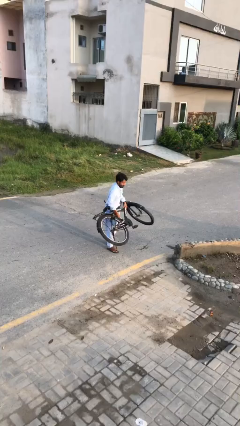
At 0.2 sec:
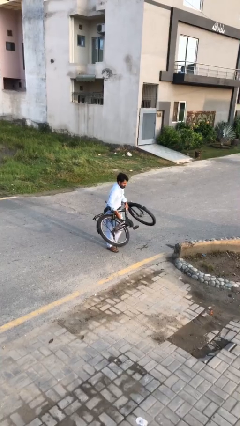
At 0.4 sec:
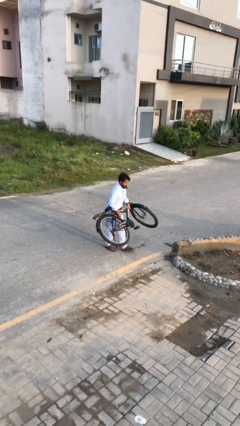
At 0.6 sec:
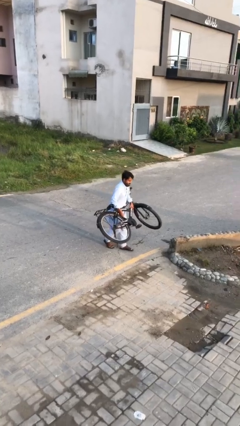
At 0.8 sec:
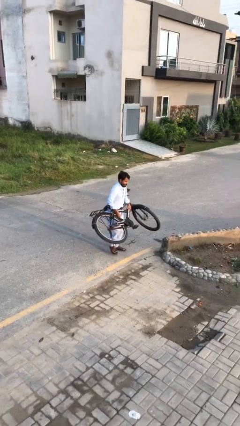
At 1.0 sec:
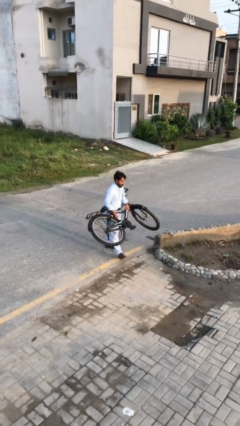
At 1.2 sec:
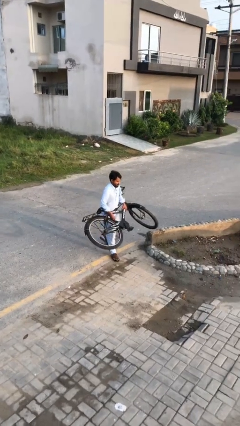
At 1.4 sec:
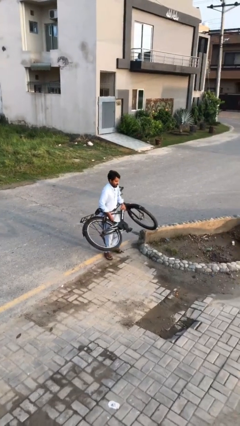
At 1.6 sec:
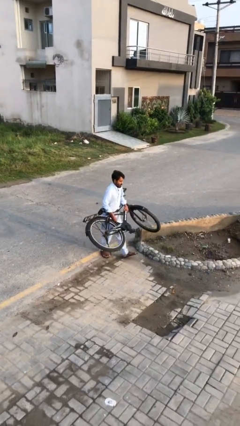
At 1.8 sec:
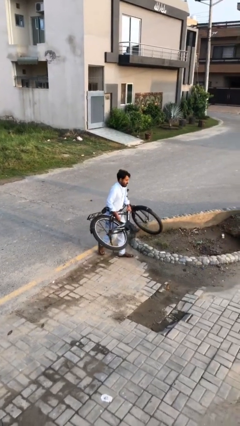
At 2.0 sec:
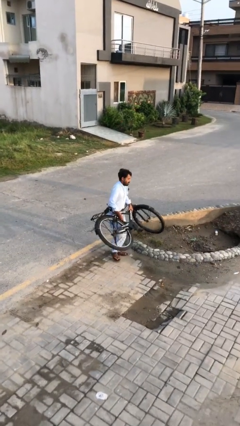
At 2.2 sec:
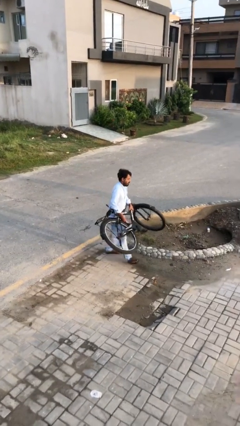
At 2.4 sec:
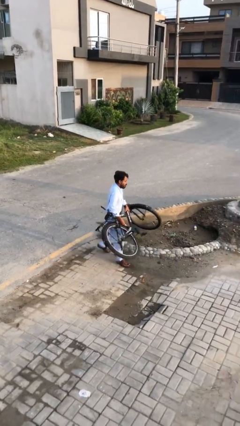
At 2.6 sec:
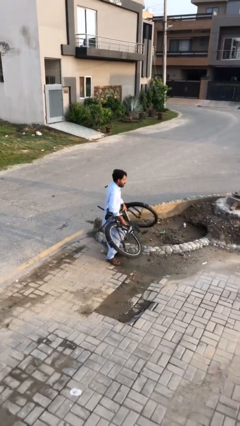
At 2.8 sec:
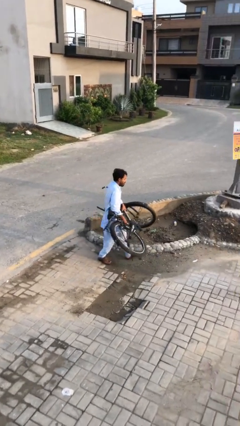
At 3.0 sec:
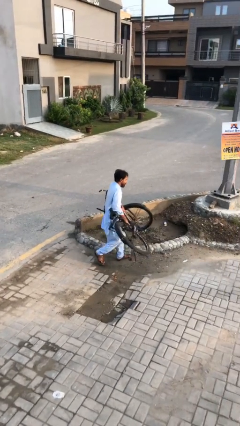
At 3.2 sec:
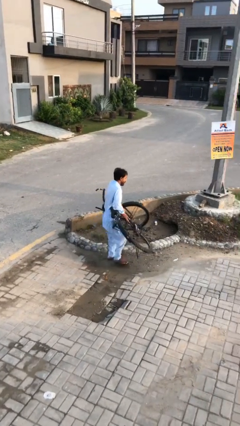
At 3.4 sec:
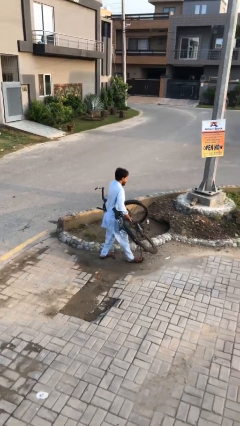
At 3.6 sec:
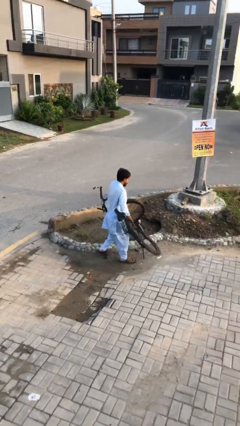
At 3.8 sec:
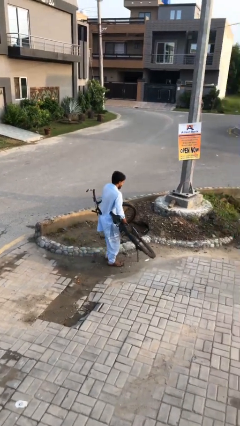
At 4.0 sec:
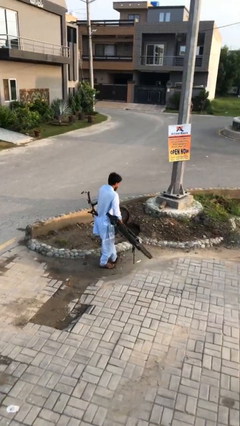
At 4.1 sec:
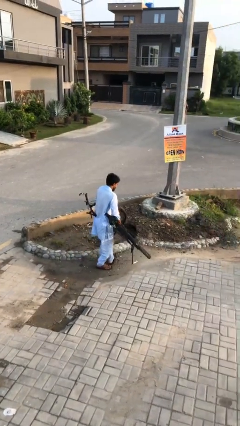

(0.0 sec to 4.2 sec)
person carries heavy object

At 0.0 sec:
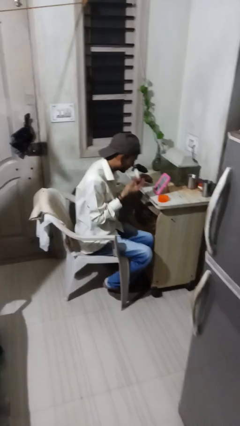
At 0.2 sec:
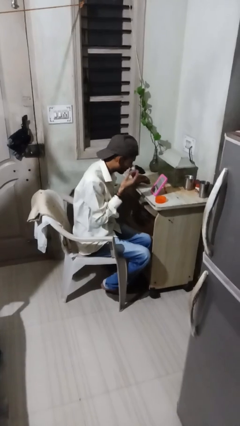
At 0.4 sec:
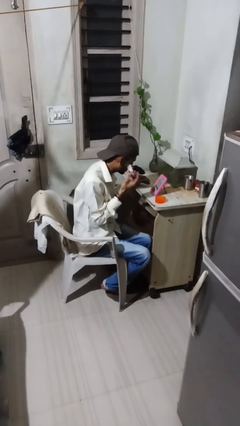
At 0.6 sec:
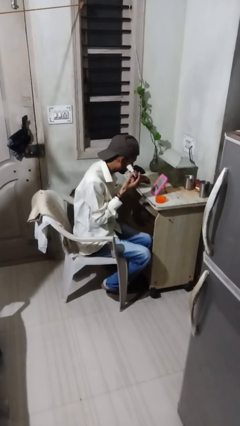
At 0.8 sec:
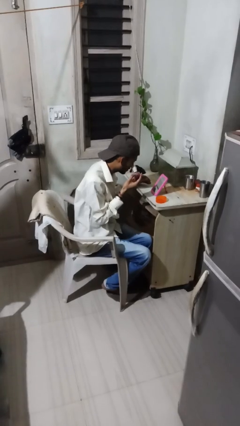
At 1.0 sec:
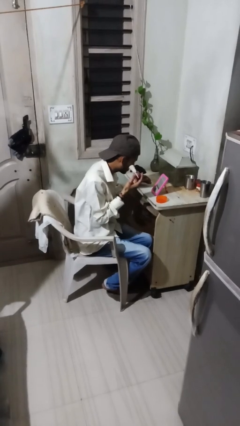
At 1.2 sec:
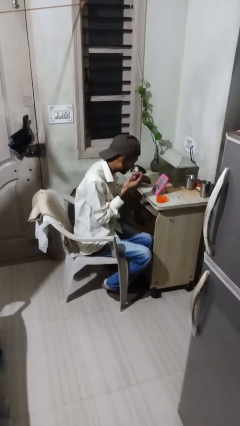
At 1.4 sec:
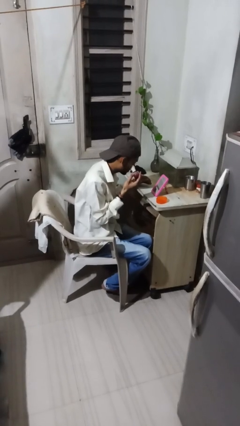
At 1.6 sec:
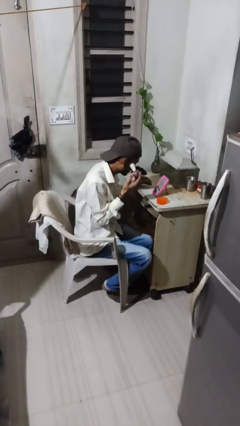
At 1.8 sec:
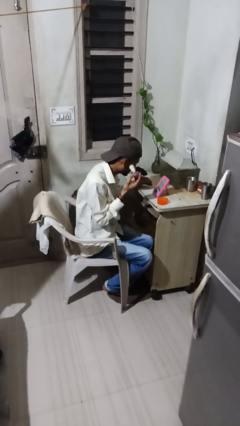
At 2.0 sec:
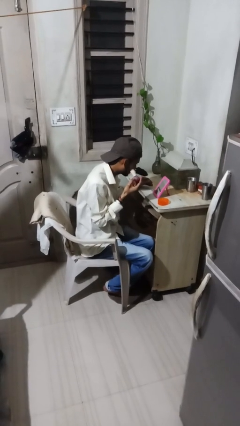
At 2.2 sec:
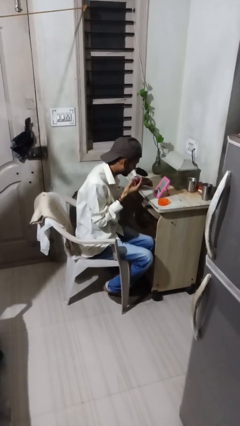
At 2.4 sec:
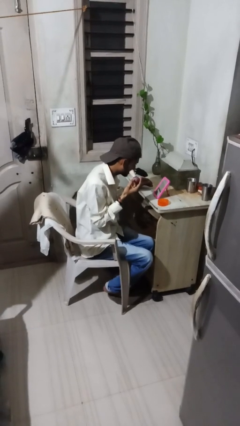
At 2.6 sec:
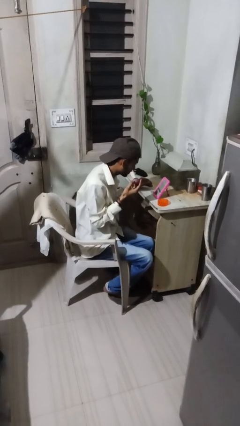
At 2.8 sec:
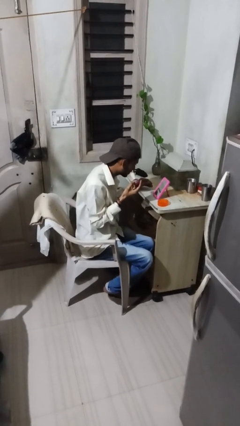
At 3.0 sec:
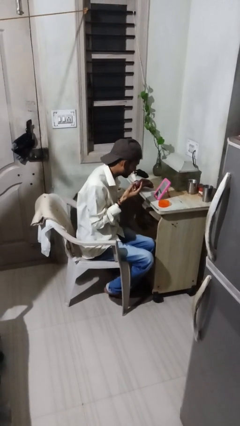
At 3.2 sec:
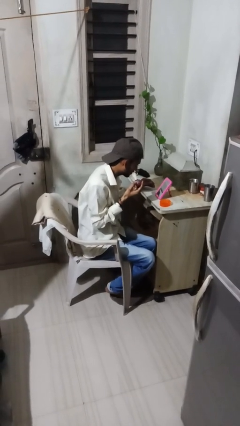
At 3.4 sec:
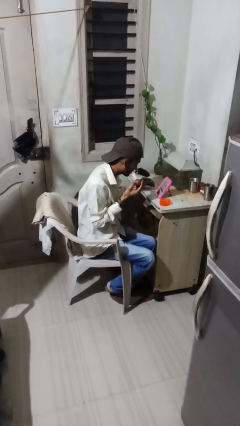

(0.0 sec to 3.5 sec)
person applies foundation makeup

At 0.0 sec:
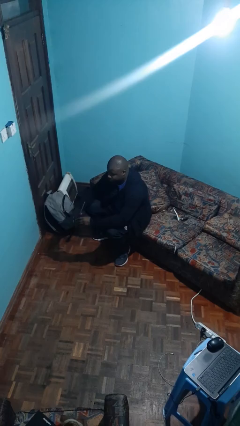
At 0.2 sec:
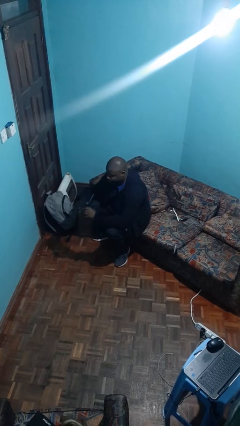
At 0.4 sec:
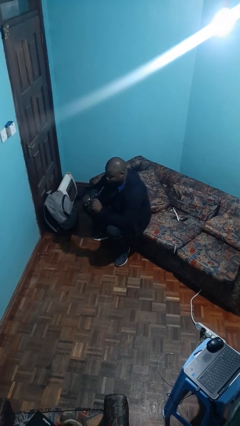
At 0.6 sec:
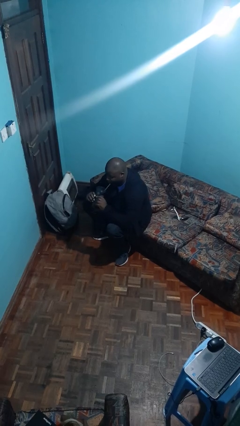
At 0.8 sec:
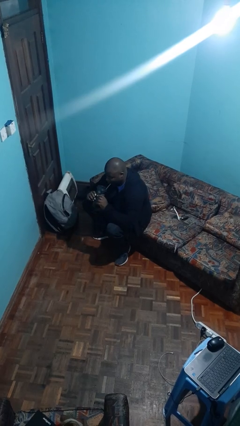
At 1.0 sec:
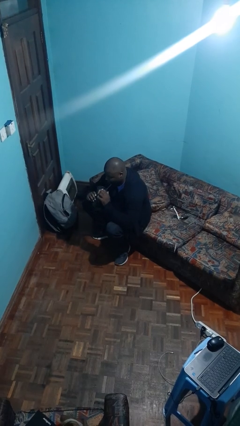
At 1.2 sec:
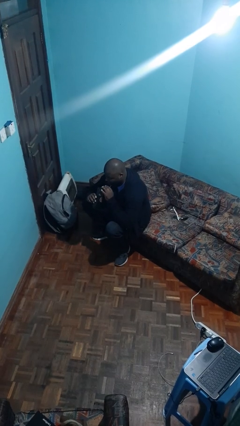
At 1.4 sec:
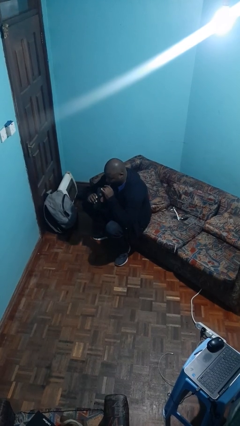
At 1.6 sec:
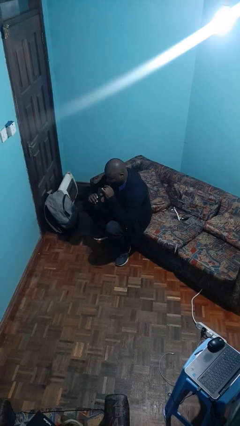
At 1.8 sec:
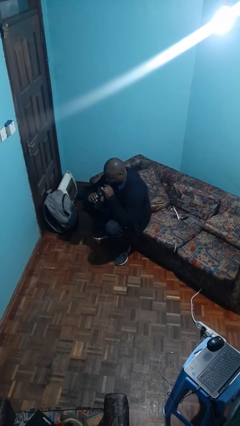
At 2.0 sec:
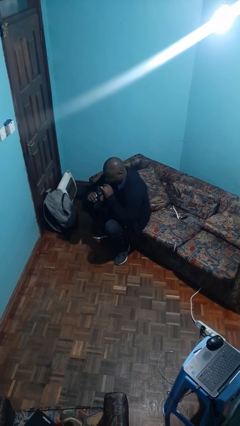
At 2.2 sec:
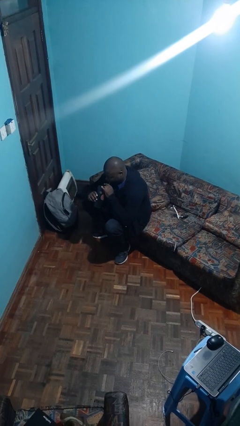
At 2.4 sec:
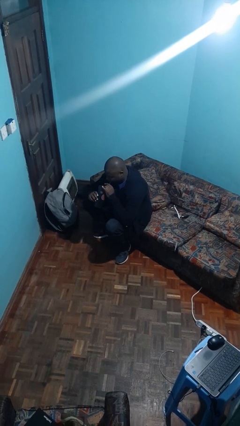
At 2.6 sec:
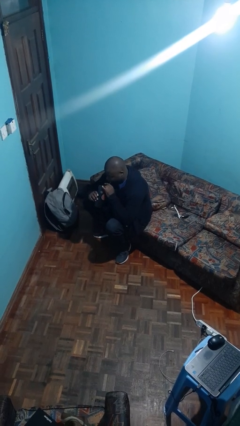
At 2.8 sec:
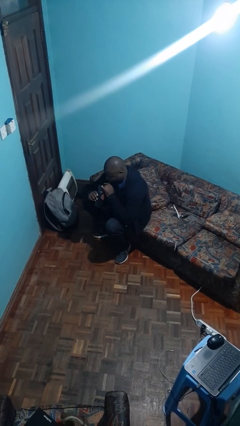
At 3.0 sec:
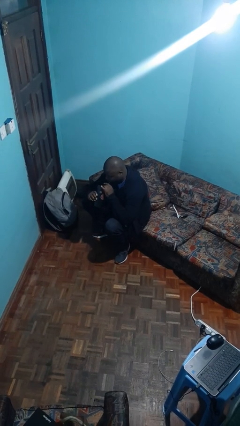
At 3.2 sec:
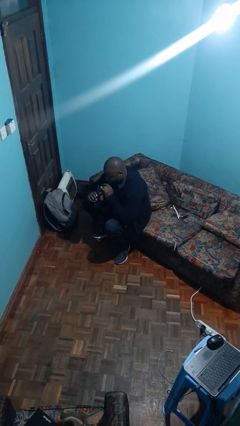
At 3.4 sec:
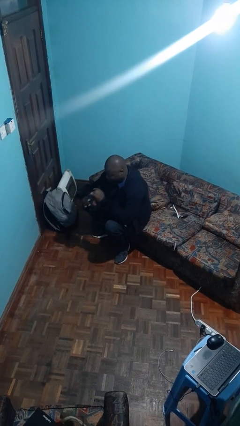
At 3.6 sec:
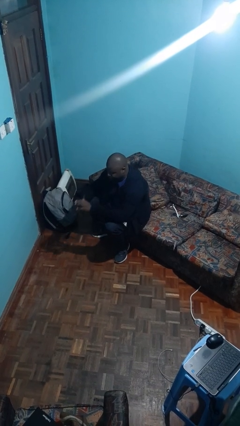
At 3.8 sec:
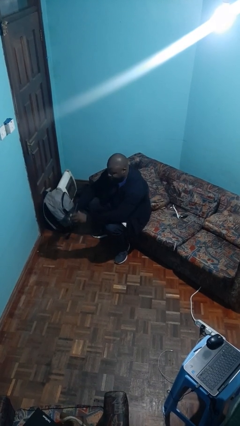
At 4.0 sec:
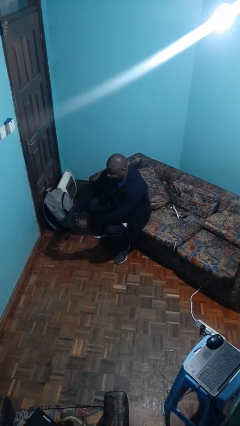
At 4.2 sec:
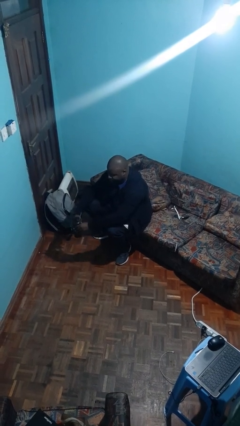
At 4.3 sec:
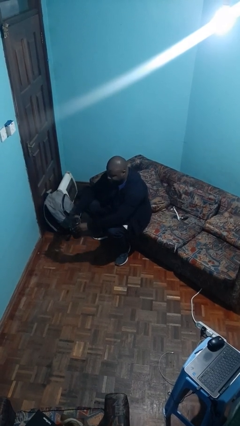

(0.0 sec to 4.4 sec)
person drinks from straw

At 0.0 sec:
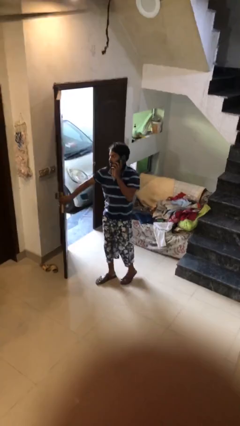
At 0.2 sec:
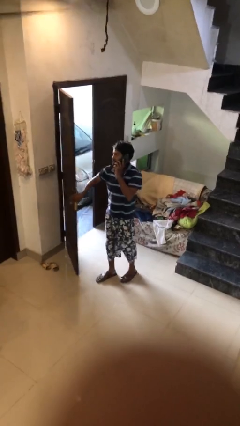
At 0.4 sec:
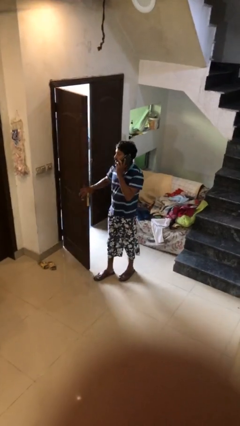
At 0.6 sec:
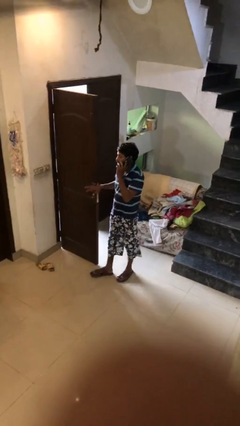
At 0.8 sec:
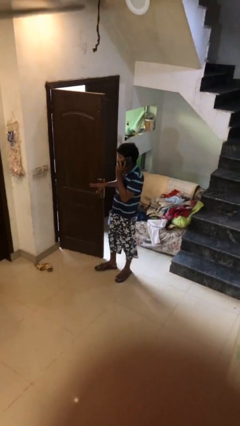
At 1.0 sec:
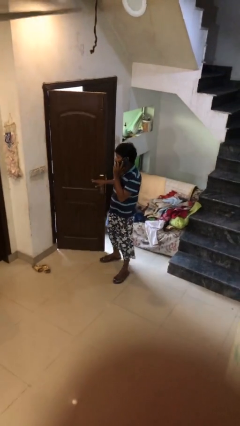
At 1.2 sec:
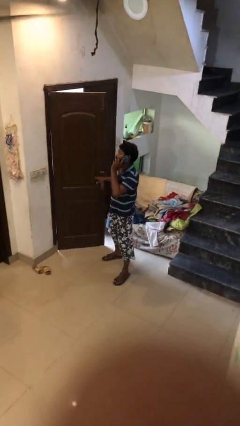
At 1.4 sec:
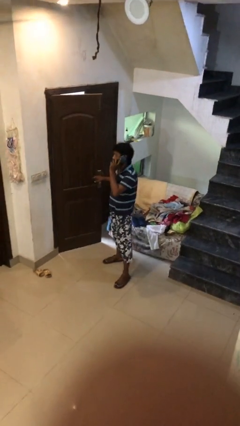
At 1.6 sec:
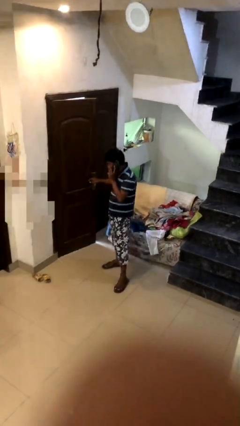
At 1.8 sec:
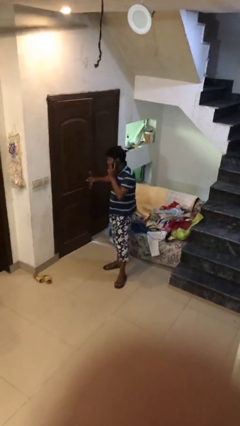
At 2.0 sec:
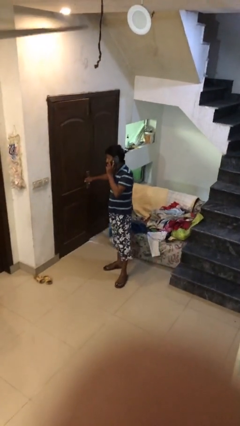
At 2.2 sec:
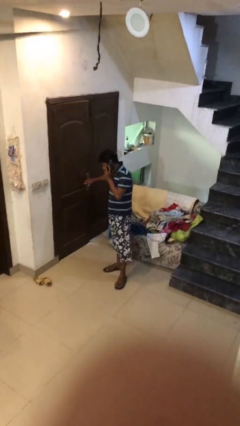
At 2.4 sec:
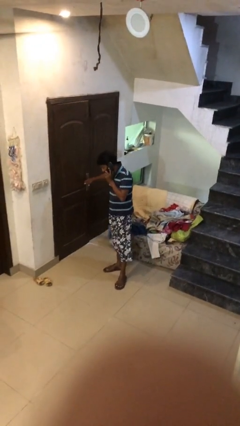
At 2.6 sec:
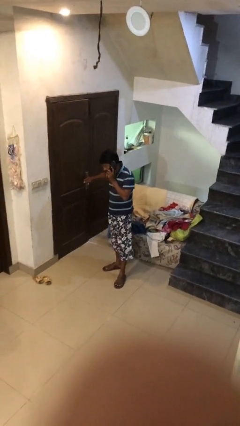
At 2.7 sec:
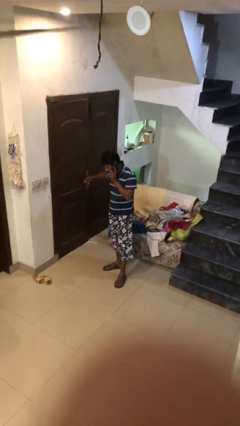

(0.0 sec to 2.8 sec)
person closes facility door

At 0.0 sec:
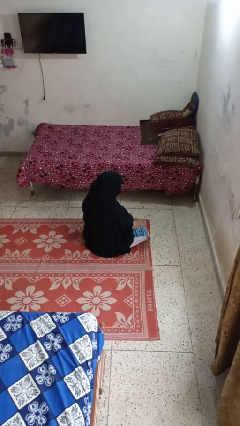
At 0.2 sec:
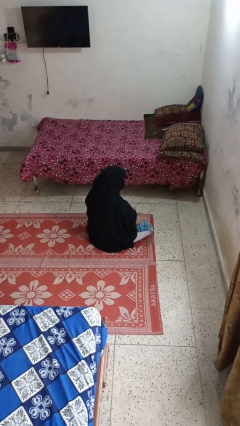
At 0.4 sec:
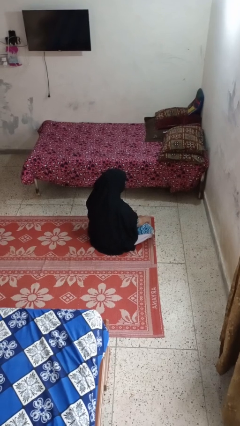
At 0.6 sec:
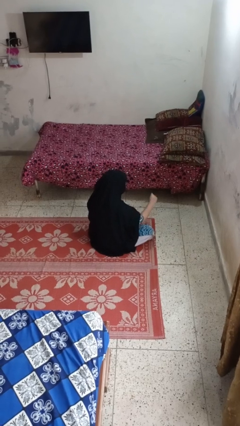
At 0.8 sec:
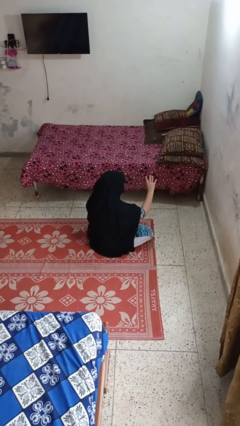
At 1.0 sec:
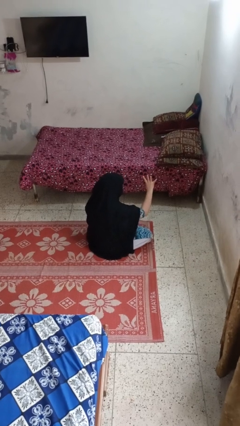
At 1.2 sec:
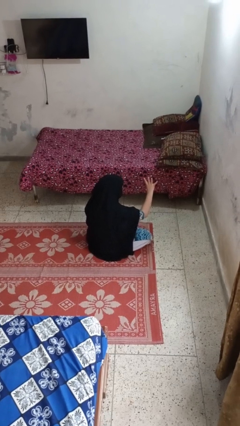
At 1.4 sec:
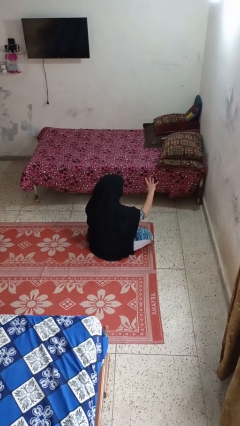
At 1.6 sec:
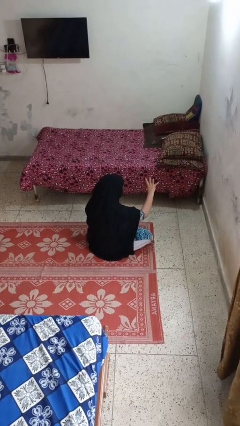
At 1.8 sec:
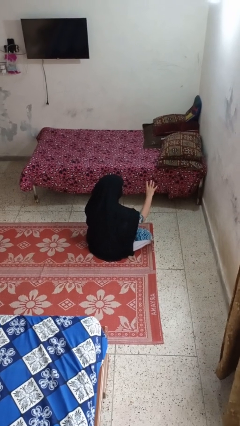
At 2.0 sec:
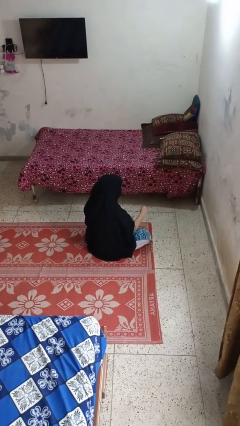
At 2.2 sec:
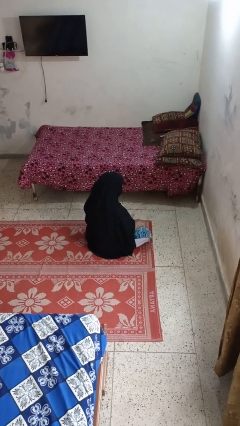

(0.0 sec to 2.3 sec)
person gestures number four

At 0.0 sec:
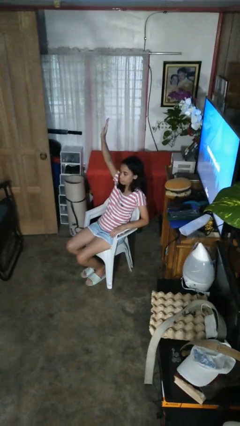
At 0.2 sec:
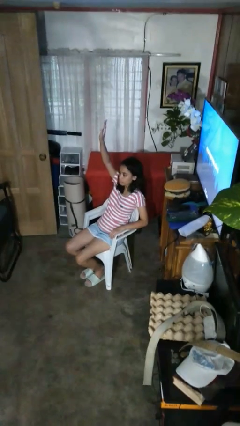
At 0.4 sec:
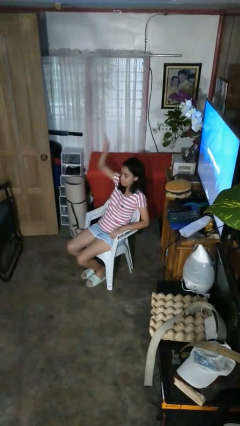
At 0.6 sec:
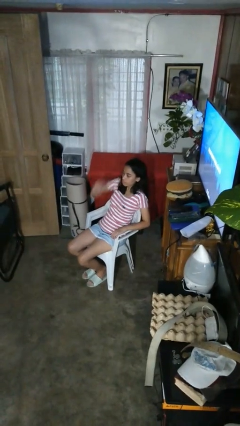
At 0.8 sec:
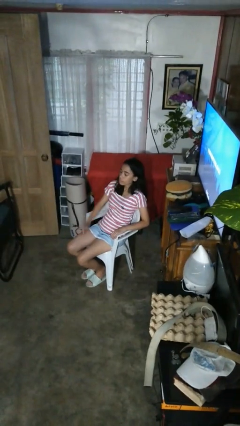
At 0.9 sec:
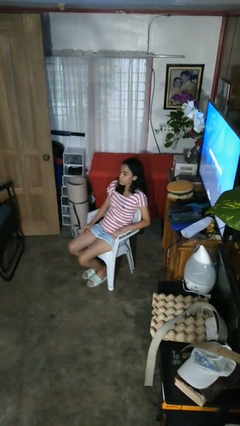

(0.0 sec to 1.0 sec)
person gestures lower hand
